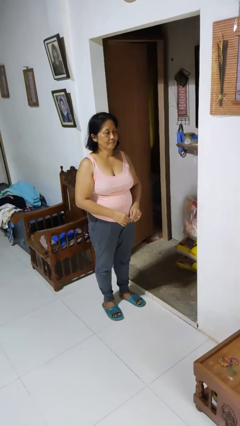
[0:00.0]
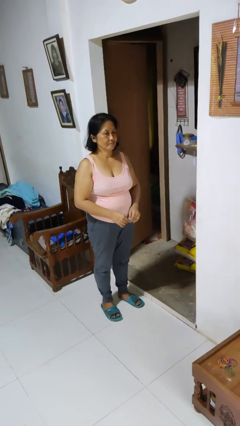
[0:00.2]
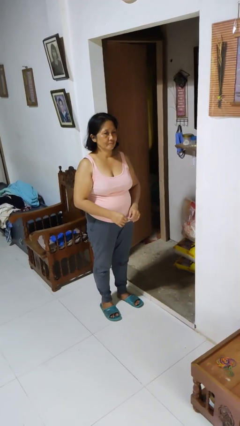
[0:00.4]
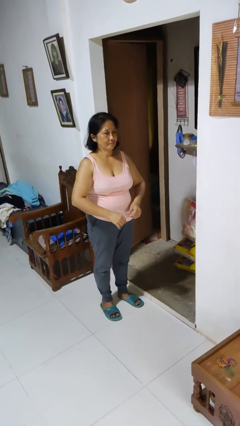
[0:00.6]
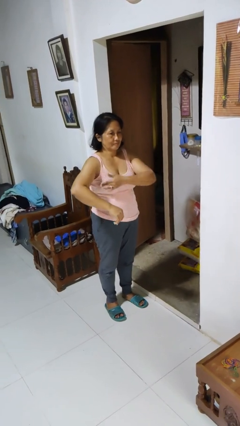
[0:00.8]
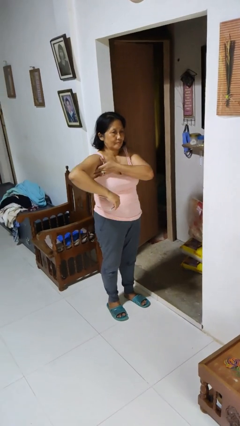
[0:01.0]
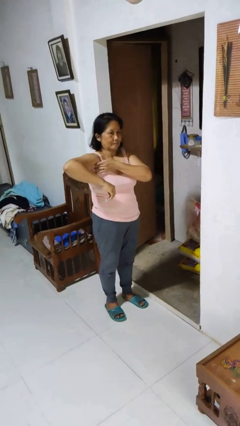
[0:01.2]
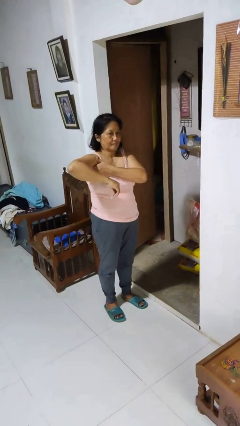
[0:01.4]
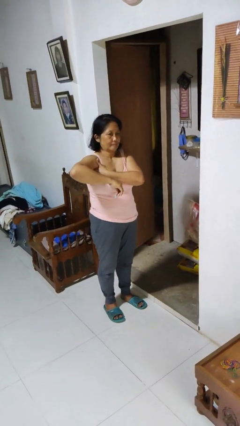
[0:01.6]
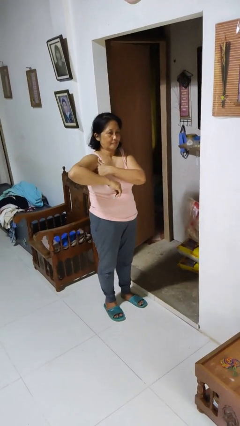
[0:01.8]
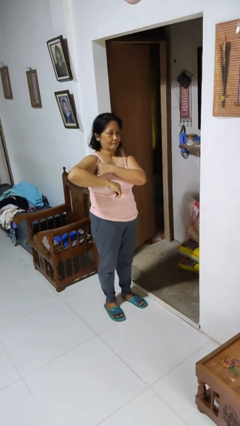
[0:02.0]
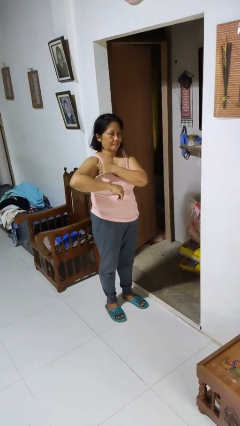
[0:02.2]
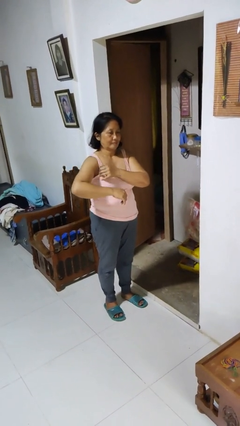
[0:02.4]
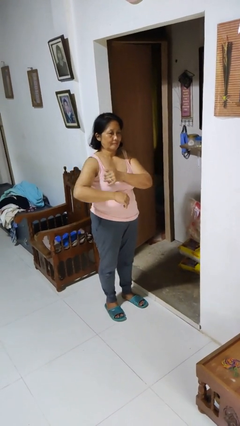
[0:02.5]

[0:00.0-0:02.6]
person applies deodorant

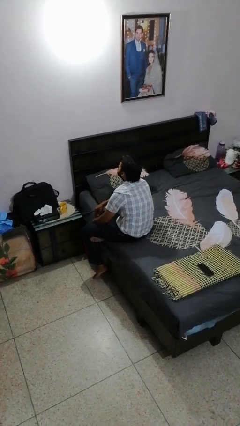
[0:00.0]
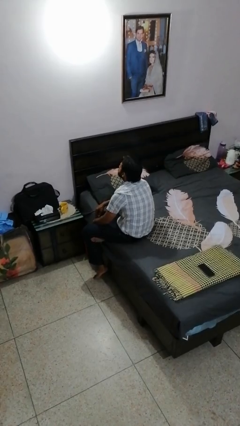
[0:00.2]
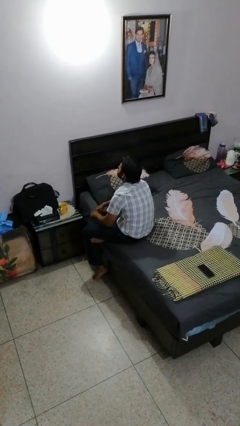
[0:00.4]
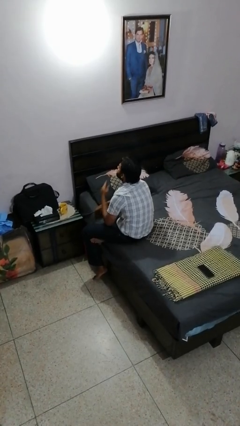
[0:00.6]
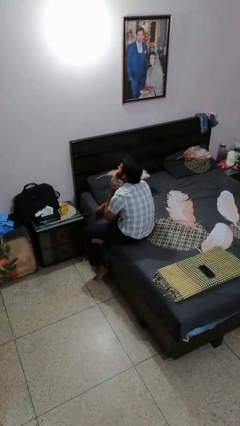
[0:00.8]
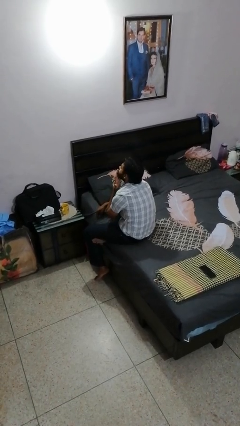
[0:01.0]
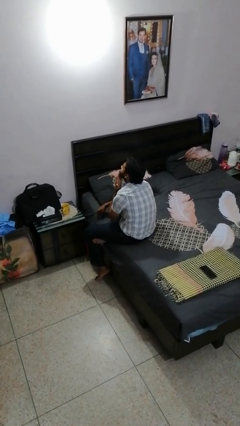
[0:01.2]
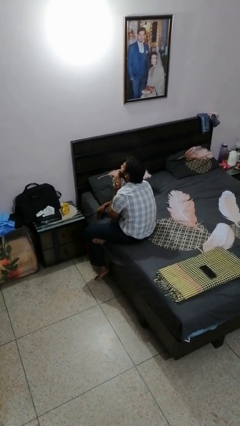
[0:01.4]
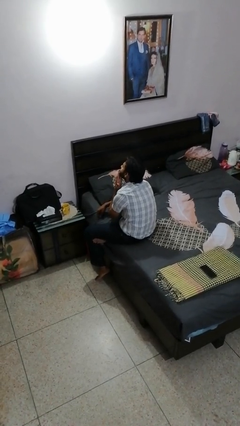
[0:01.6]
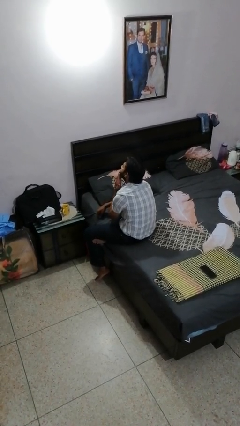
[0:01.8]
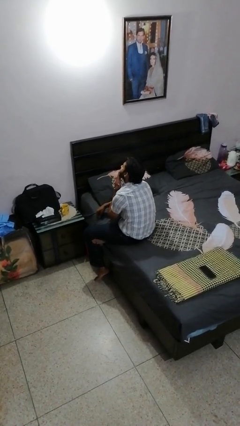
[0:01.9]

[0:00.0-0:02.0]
person strokes chin

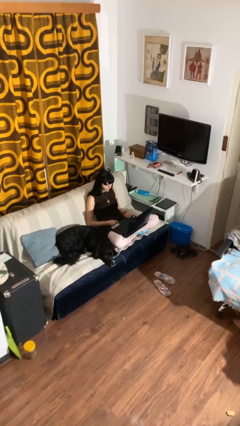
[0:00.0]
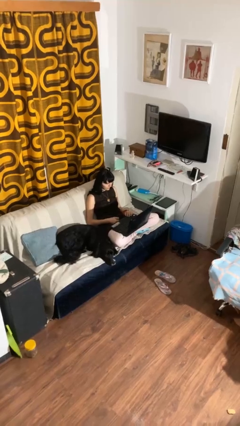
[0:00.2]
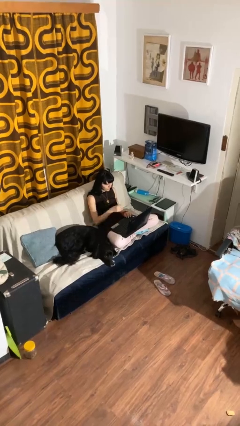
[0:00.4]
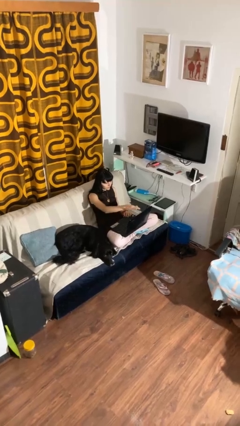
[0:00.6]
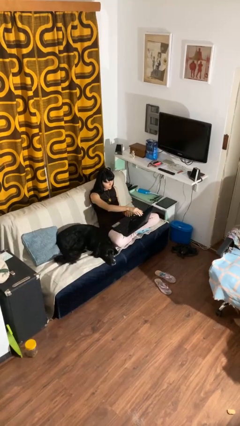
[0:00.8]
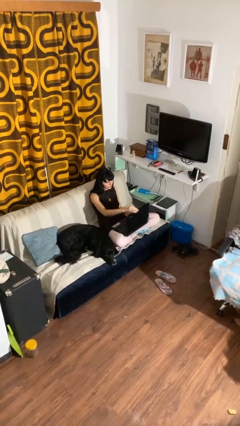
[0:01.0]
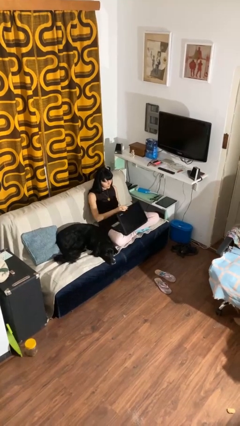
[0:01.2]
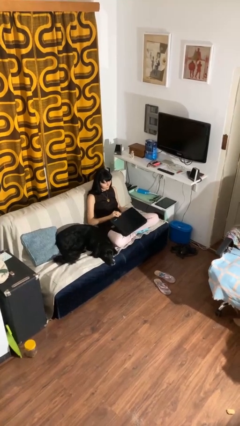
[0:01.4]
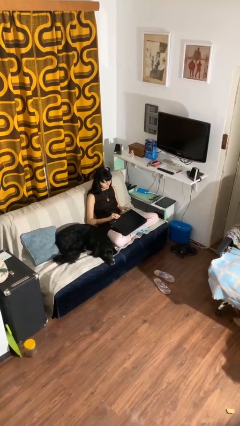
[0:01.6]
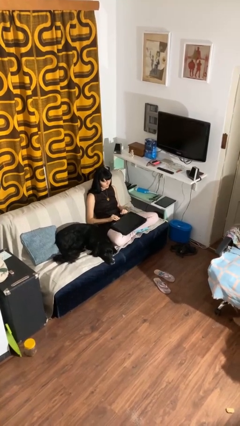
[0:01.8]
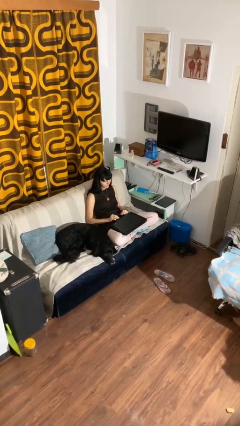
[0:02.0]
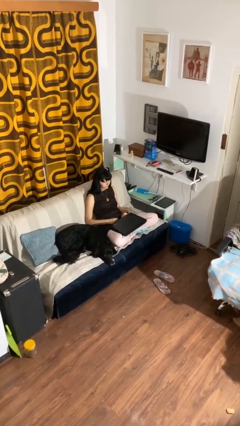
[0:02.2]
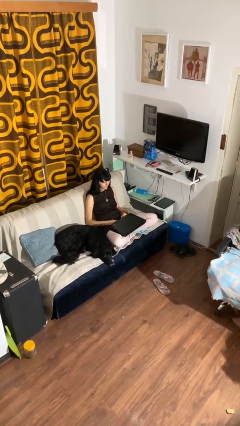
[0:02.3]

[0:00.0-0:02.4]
person closes laptop

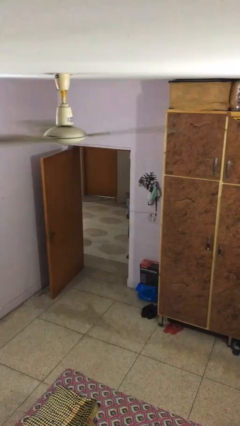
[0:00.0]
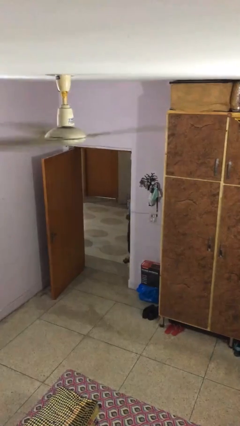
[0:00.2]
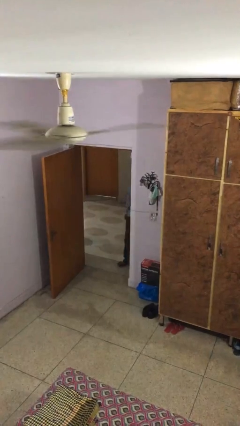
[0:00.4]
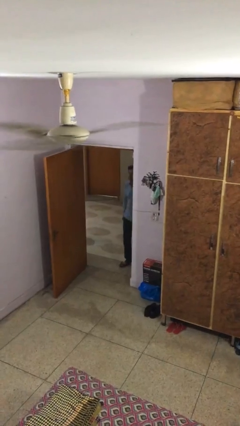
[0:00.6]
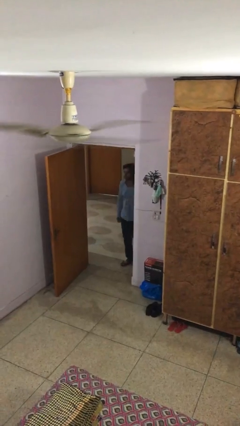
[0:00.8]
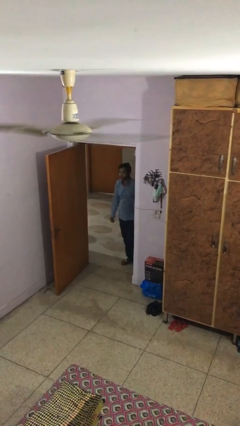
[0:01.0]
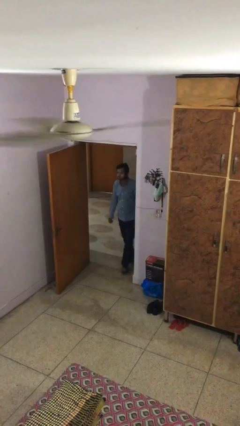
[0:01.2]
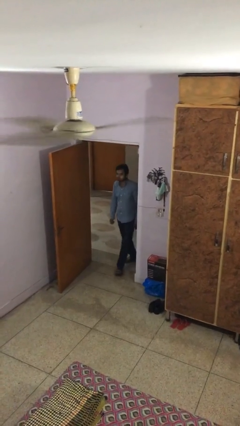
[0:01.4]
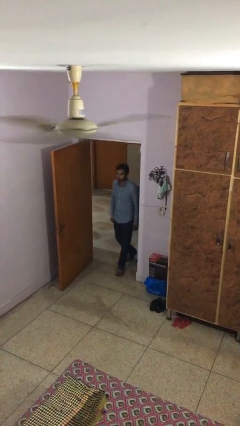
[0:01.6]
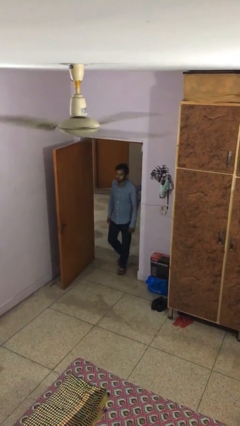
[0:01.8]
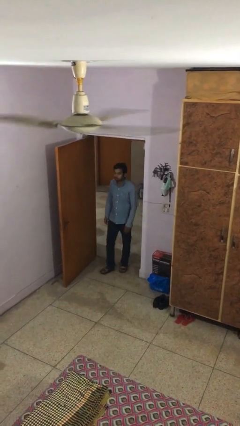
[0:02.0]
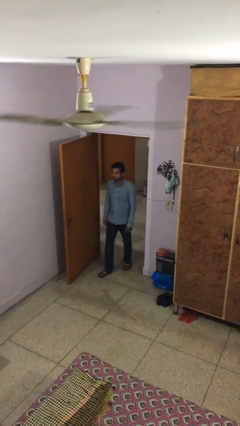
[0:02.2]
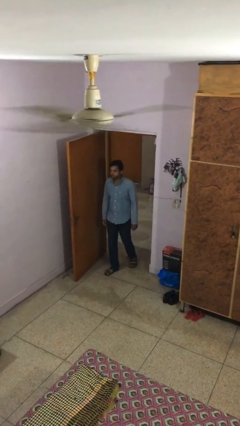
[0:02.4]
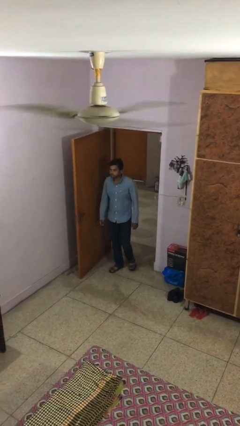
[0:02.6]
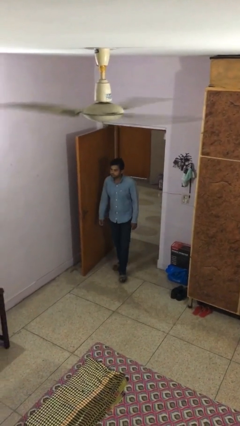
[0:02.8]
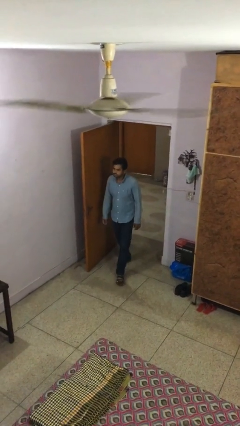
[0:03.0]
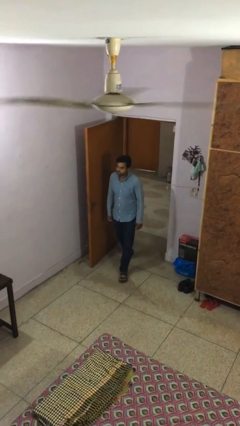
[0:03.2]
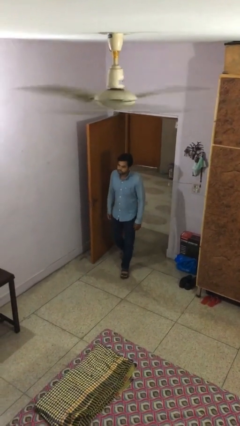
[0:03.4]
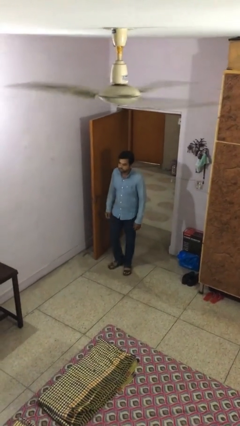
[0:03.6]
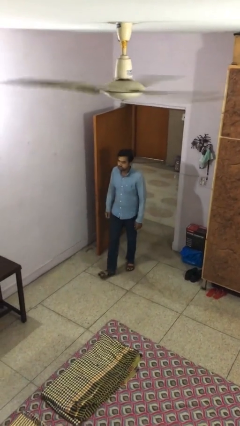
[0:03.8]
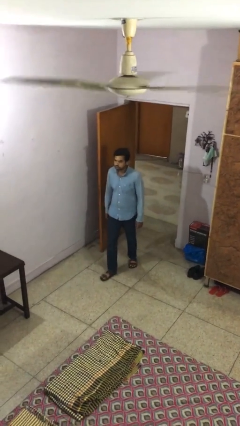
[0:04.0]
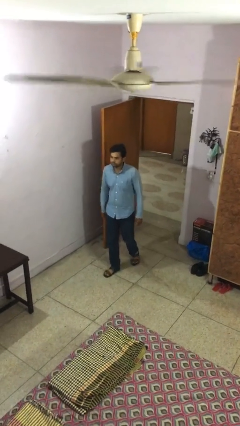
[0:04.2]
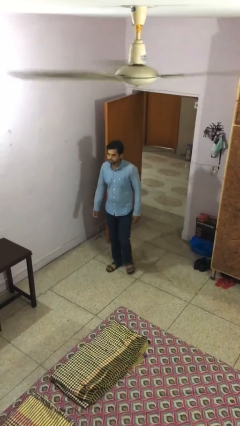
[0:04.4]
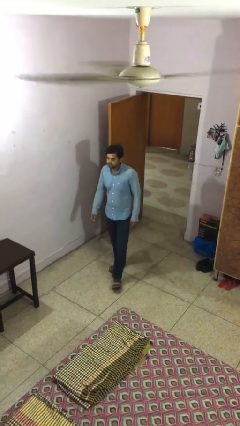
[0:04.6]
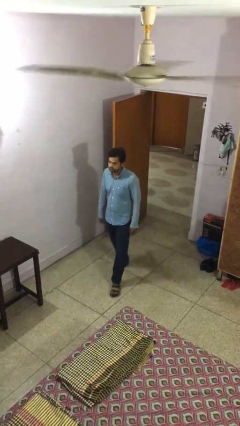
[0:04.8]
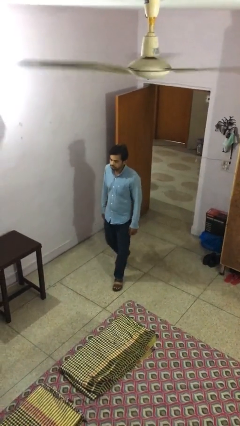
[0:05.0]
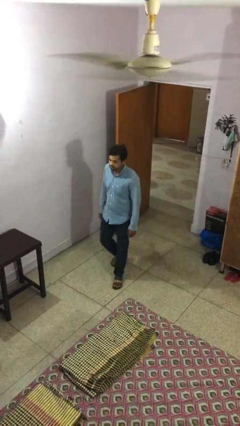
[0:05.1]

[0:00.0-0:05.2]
person enters scene through structure

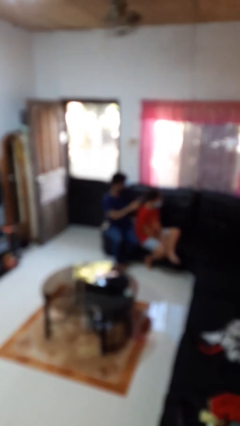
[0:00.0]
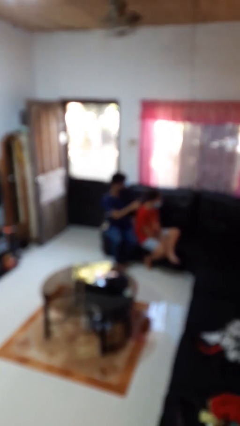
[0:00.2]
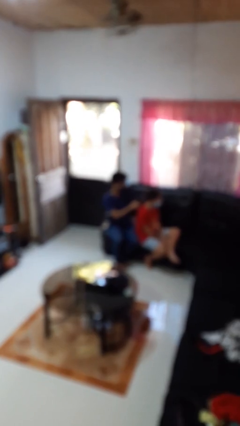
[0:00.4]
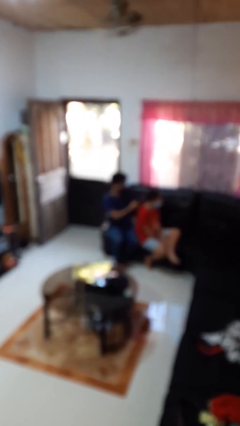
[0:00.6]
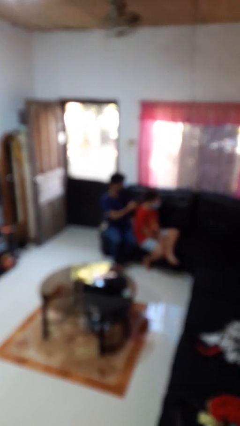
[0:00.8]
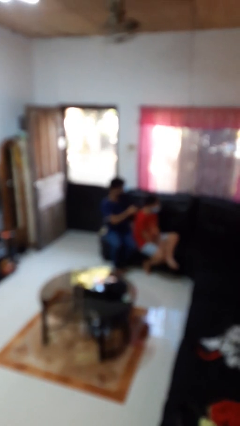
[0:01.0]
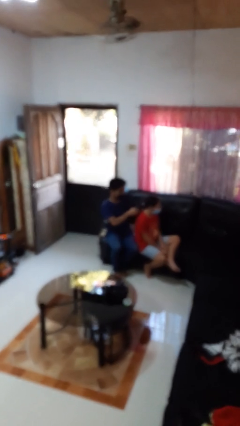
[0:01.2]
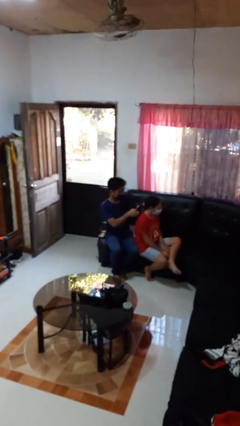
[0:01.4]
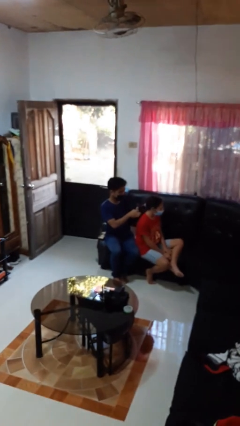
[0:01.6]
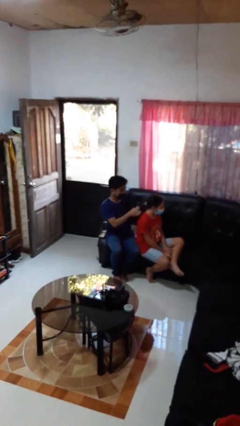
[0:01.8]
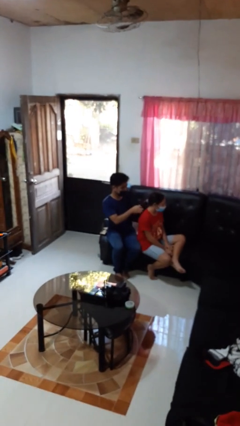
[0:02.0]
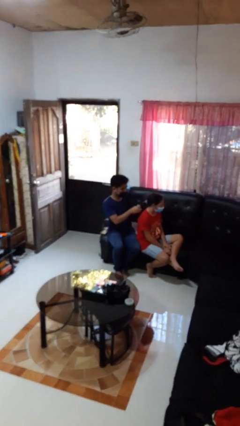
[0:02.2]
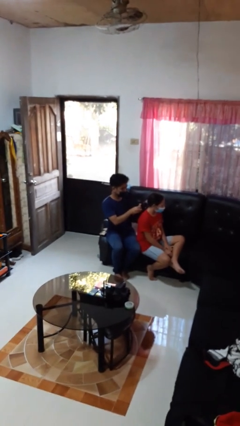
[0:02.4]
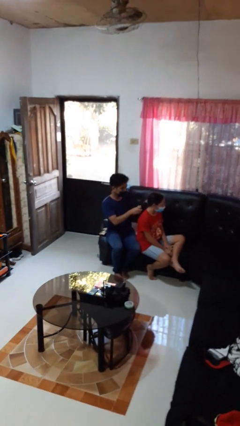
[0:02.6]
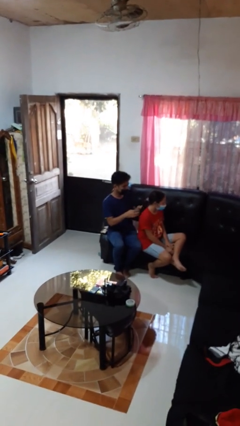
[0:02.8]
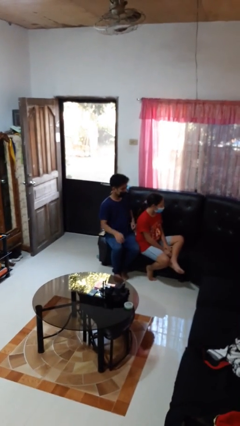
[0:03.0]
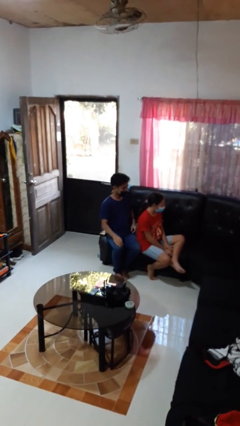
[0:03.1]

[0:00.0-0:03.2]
person braids hair of person

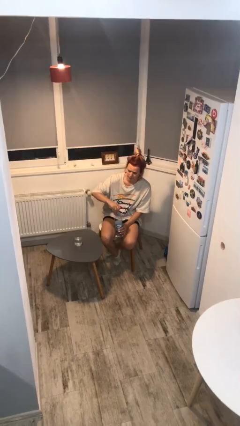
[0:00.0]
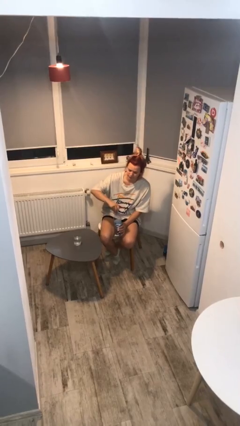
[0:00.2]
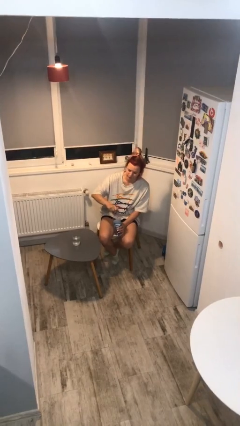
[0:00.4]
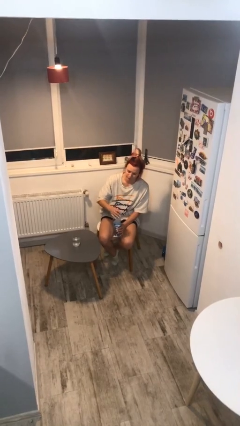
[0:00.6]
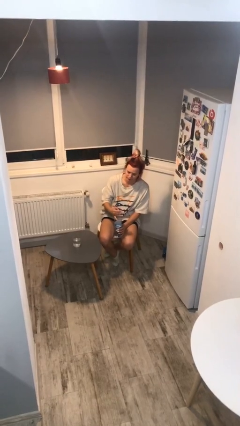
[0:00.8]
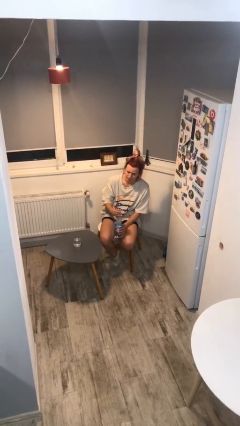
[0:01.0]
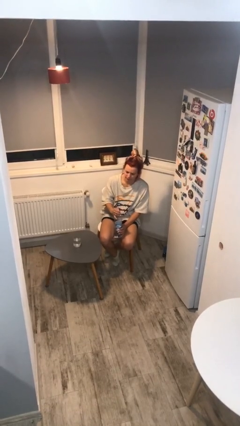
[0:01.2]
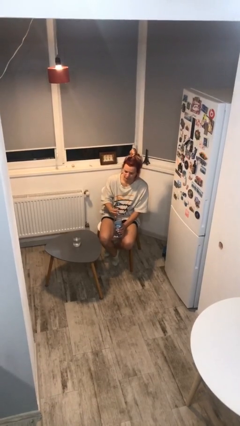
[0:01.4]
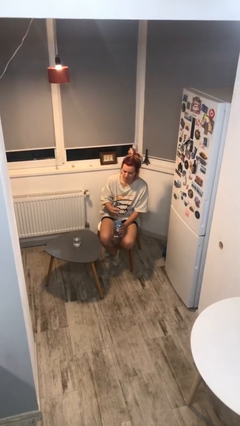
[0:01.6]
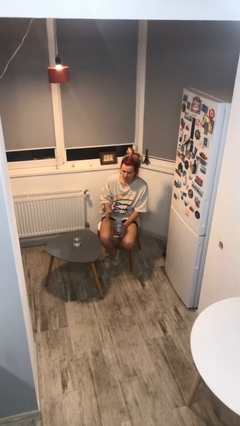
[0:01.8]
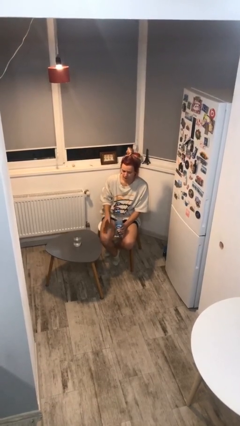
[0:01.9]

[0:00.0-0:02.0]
person screws lid to bottle
